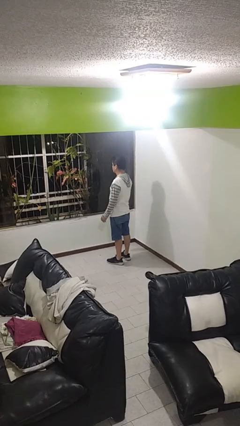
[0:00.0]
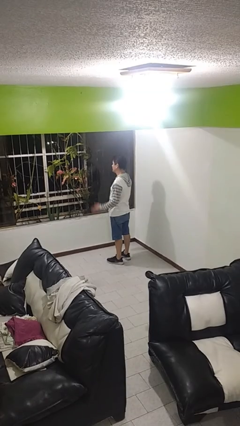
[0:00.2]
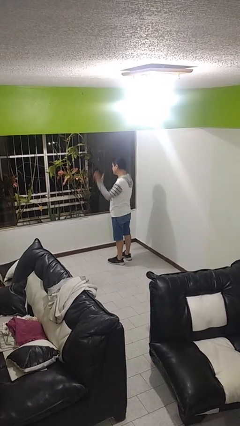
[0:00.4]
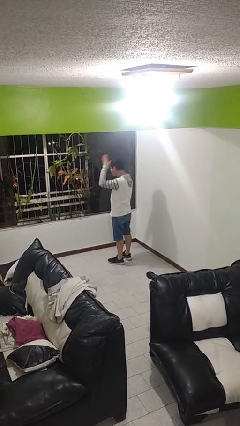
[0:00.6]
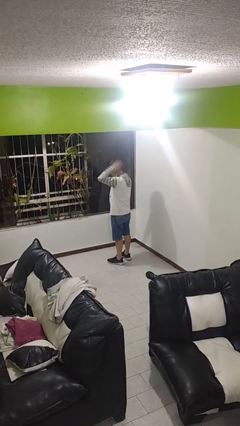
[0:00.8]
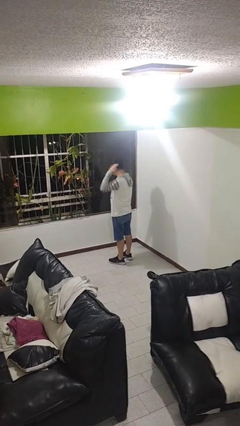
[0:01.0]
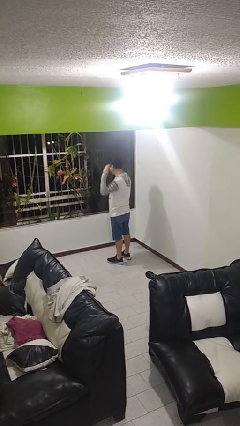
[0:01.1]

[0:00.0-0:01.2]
person swats bug

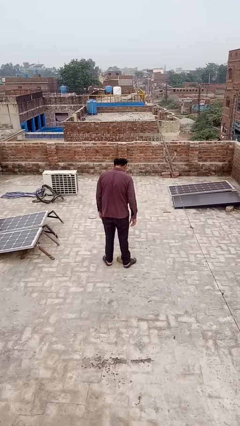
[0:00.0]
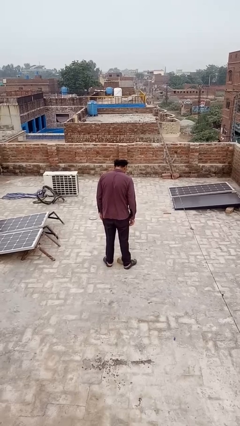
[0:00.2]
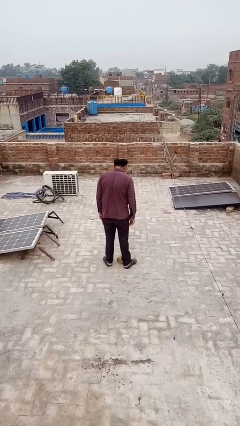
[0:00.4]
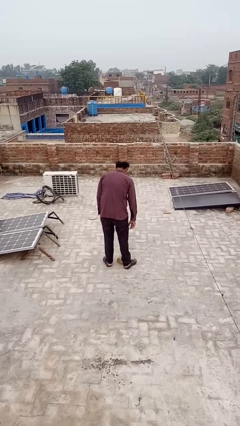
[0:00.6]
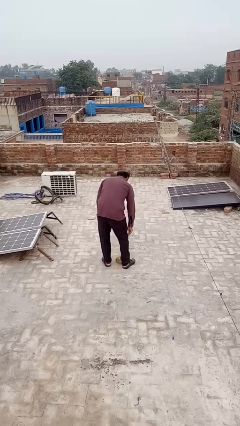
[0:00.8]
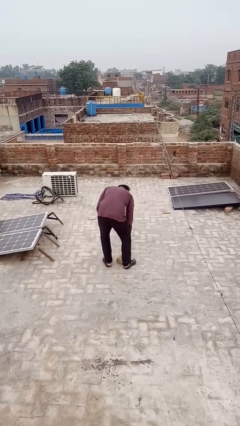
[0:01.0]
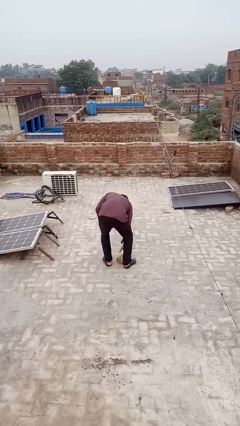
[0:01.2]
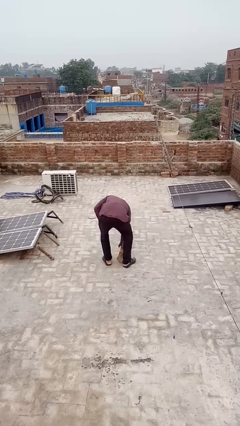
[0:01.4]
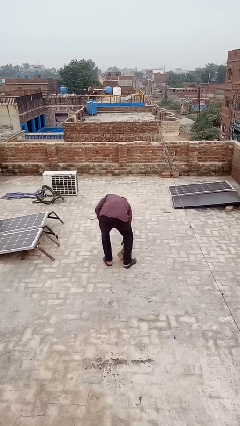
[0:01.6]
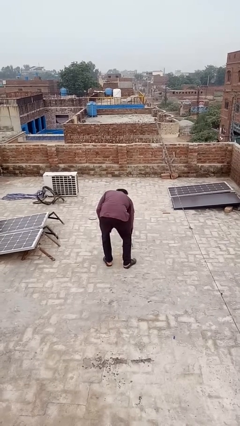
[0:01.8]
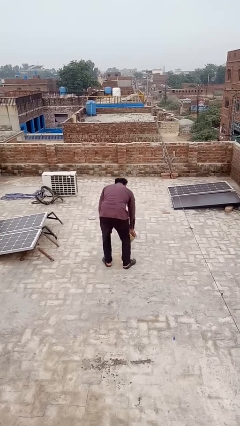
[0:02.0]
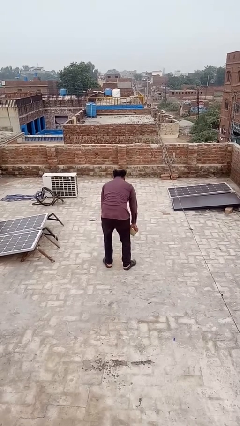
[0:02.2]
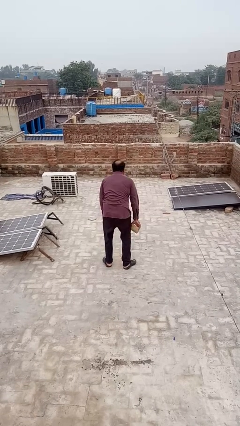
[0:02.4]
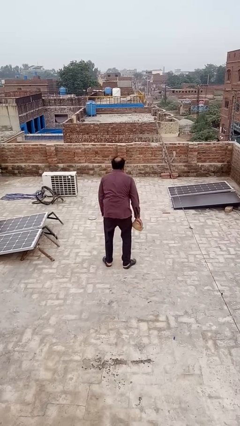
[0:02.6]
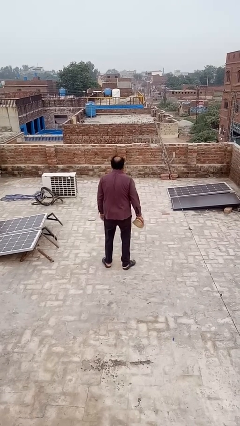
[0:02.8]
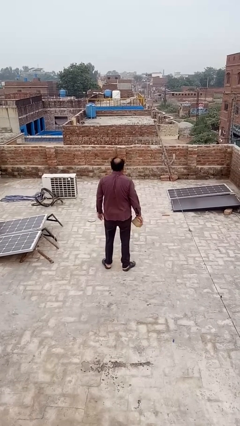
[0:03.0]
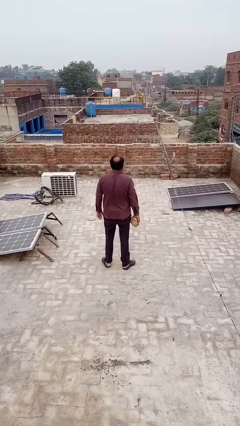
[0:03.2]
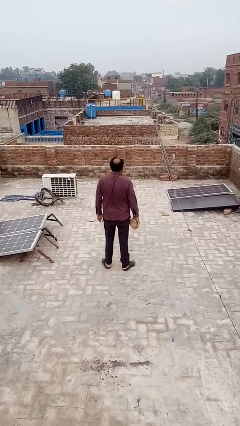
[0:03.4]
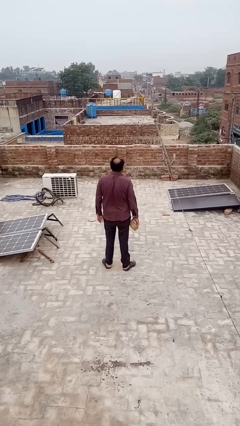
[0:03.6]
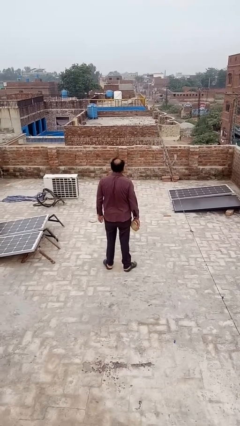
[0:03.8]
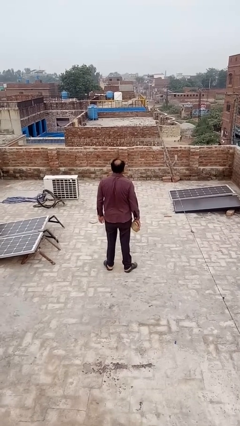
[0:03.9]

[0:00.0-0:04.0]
person picks up object from floor

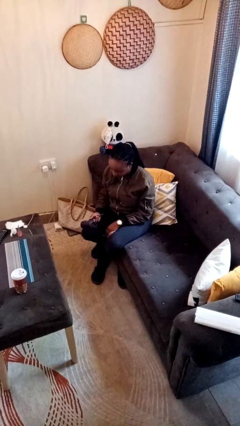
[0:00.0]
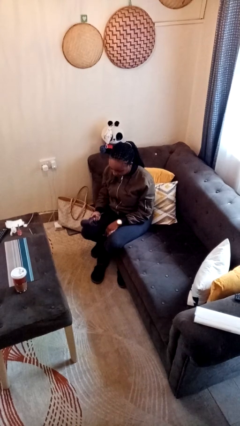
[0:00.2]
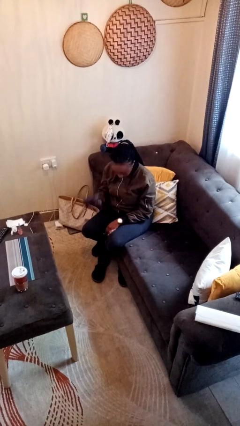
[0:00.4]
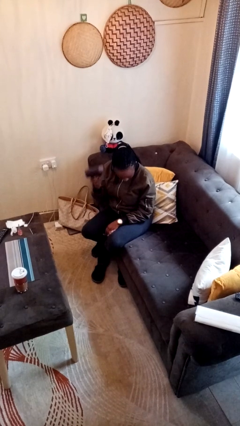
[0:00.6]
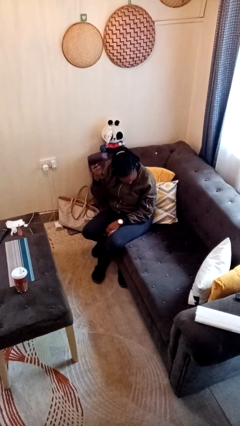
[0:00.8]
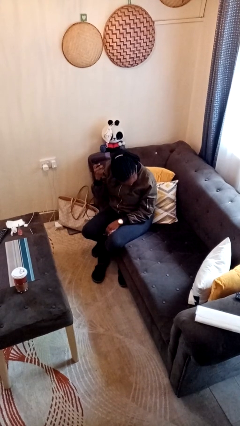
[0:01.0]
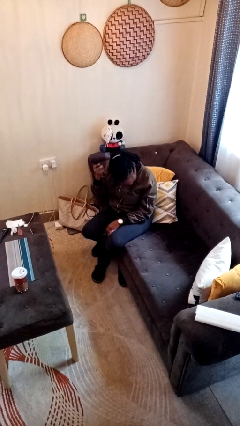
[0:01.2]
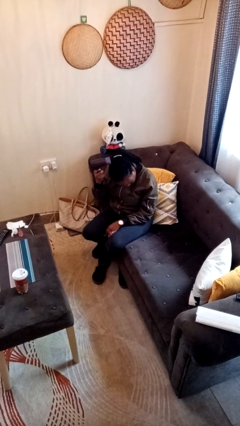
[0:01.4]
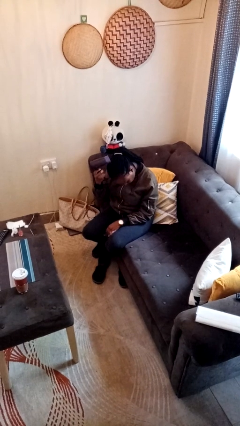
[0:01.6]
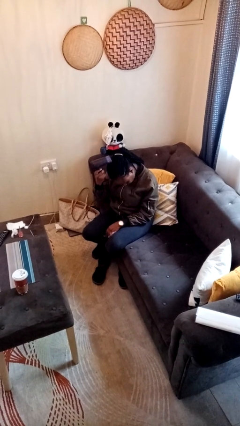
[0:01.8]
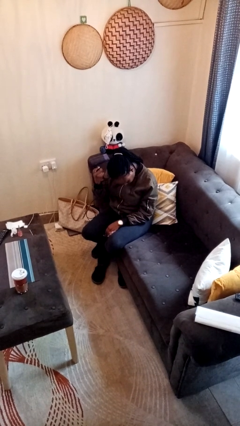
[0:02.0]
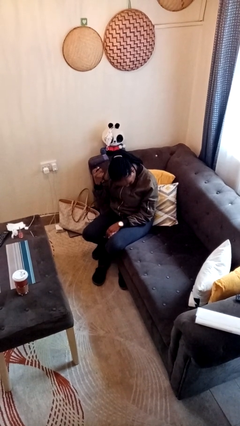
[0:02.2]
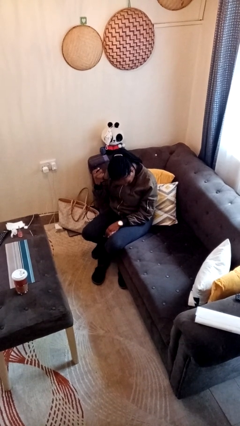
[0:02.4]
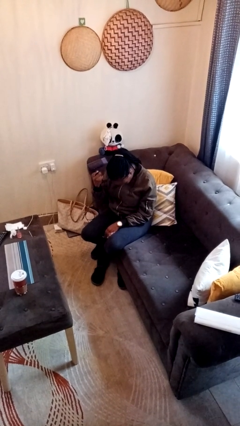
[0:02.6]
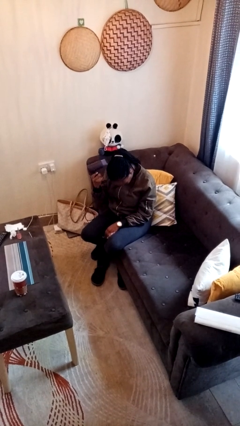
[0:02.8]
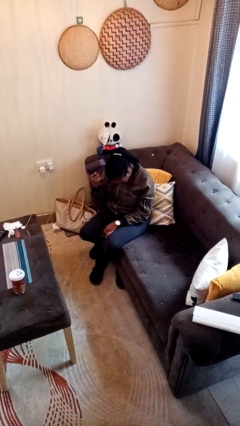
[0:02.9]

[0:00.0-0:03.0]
person dries hair with hairdryer

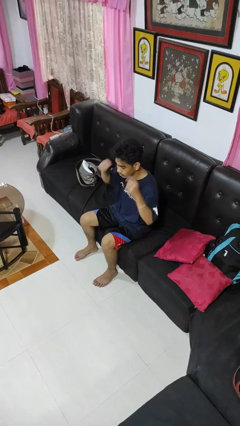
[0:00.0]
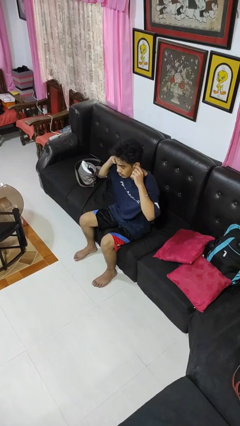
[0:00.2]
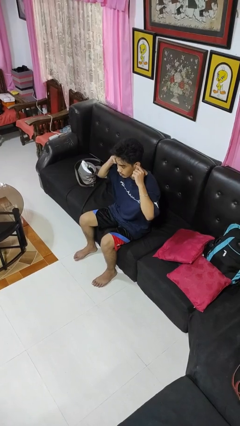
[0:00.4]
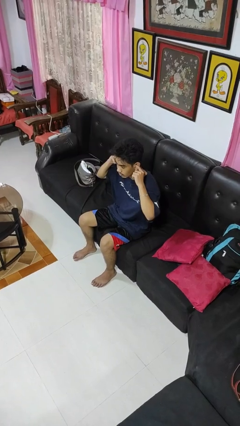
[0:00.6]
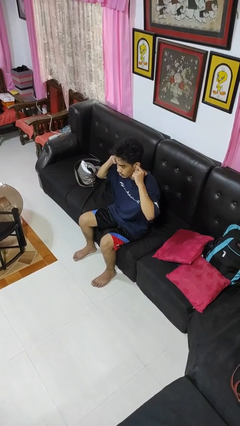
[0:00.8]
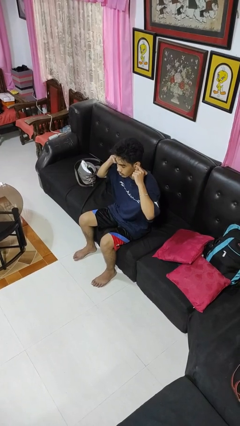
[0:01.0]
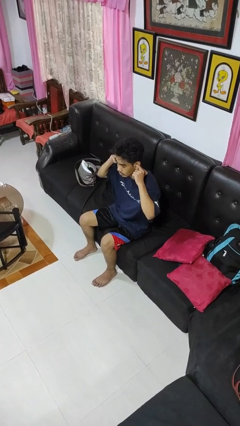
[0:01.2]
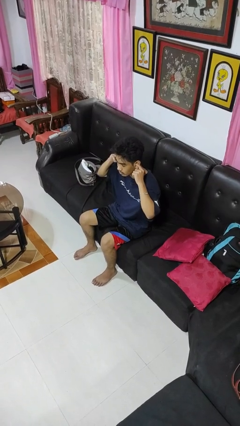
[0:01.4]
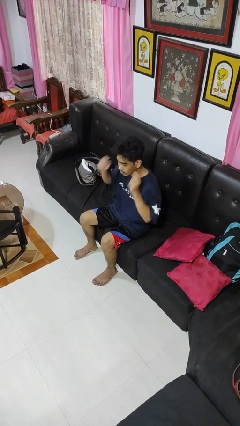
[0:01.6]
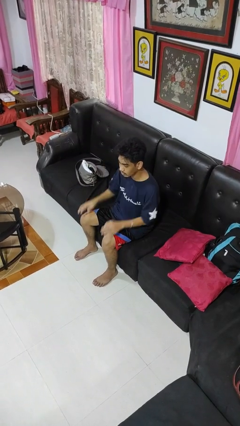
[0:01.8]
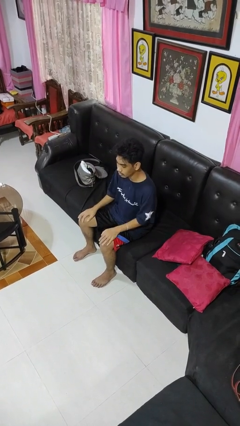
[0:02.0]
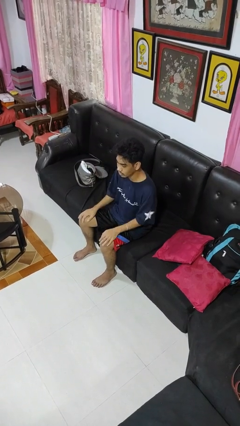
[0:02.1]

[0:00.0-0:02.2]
person puts fingers in ear

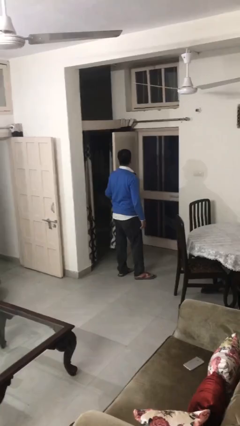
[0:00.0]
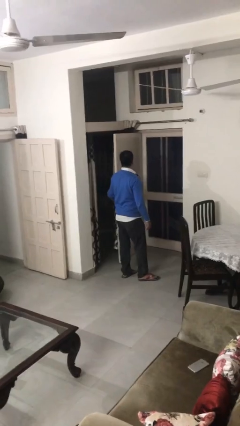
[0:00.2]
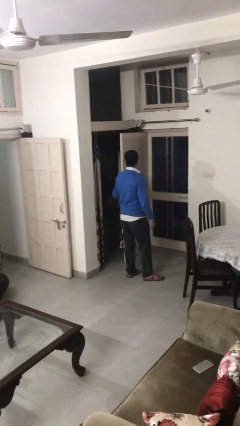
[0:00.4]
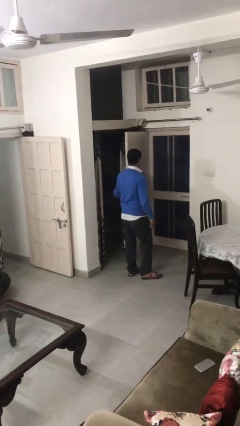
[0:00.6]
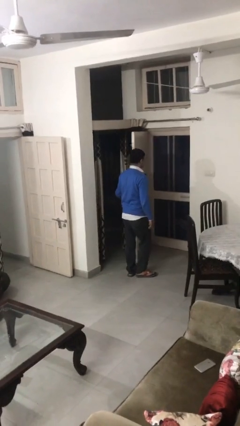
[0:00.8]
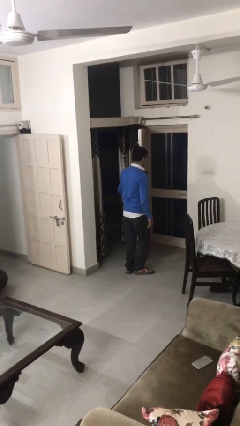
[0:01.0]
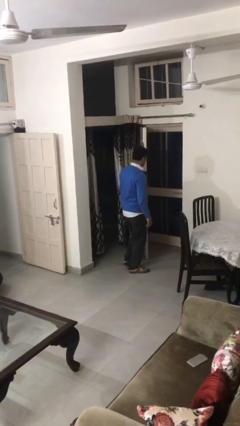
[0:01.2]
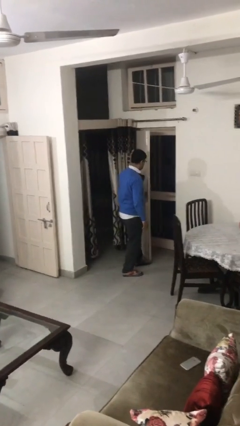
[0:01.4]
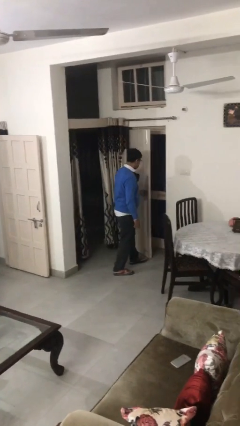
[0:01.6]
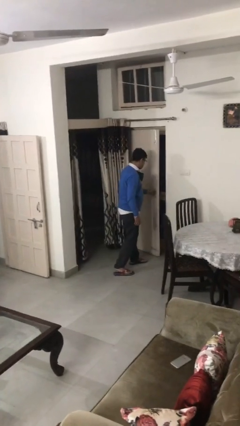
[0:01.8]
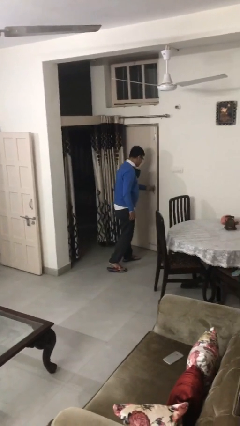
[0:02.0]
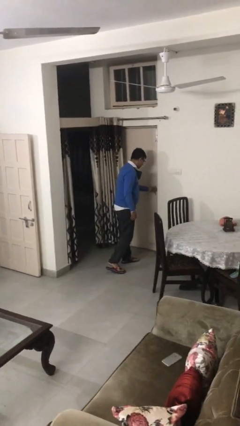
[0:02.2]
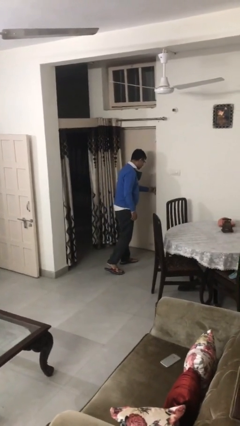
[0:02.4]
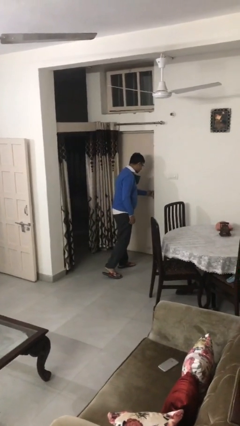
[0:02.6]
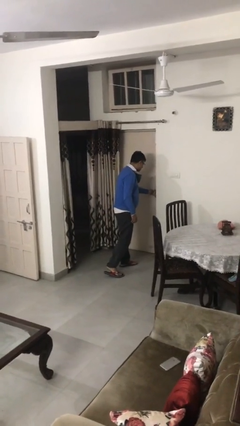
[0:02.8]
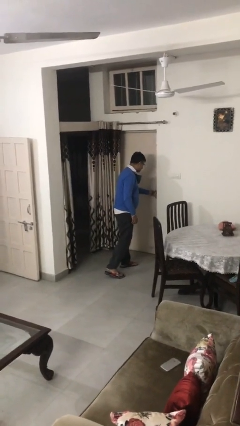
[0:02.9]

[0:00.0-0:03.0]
person closes facility door

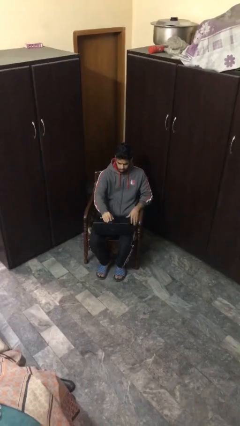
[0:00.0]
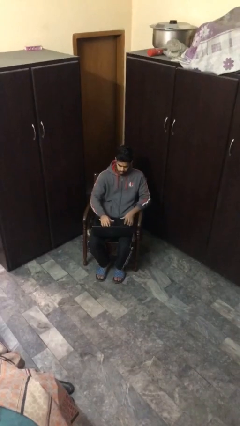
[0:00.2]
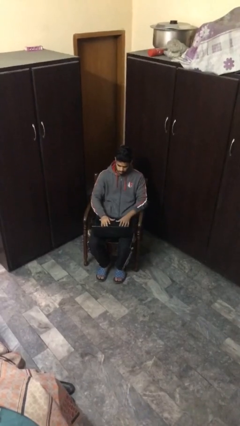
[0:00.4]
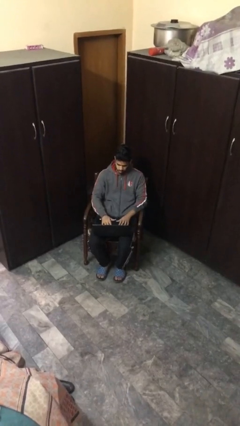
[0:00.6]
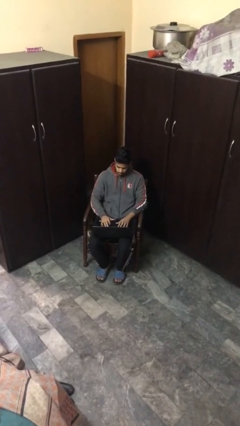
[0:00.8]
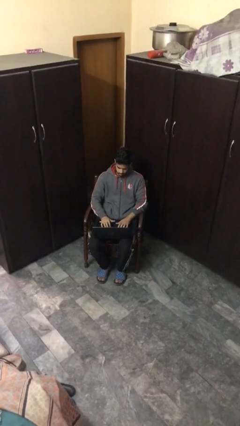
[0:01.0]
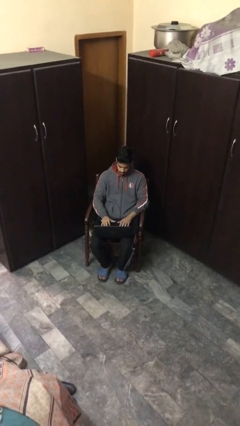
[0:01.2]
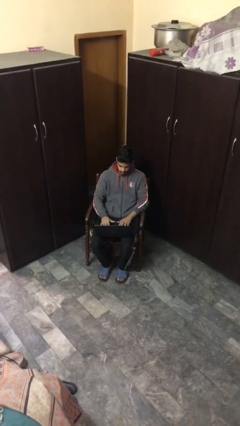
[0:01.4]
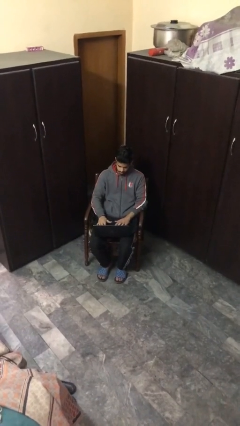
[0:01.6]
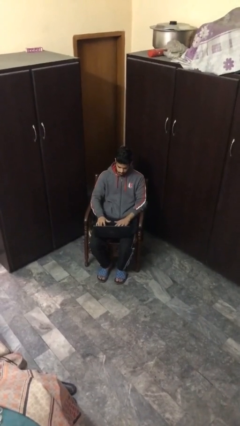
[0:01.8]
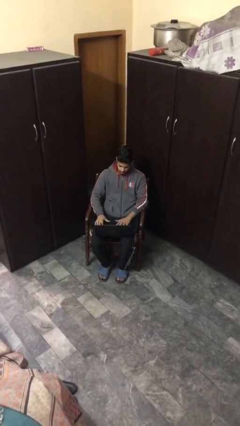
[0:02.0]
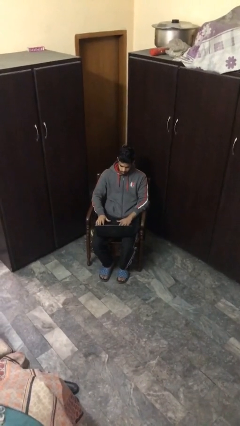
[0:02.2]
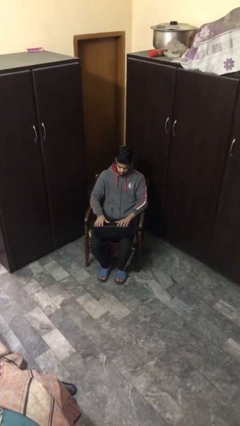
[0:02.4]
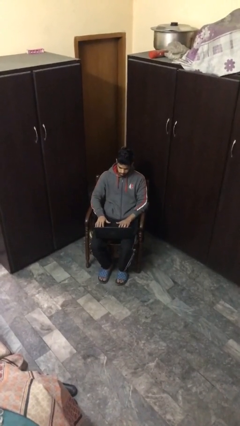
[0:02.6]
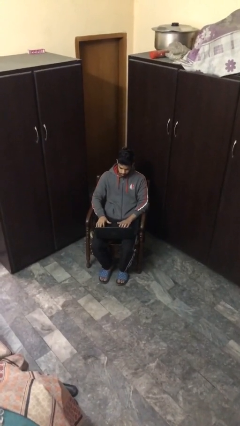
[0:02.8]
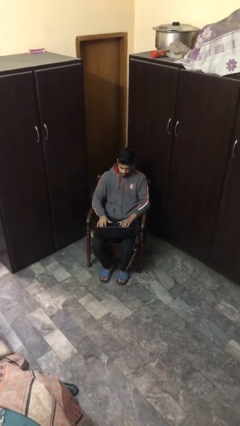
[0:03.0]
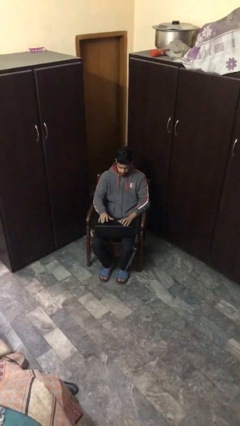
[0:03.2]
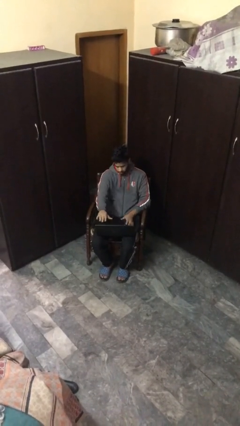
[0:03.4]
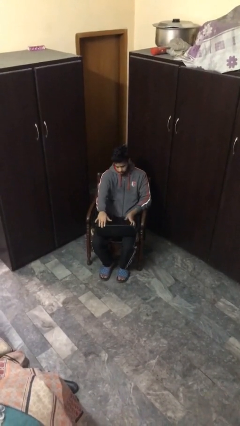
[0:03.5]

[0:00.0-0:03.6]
person interacts with laptop

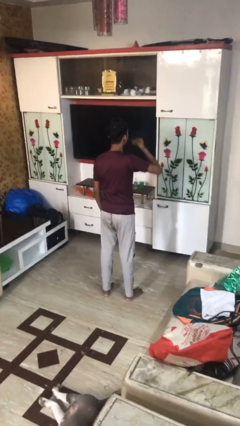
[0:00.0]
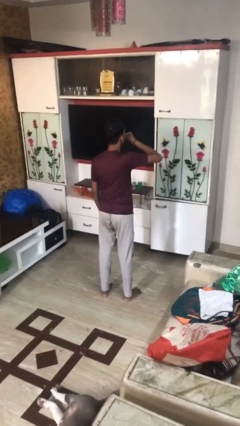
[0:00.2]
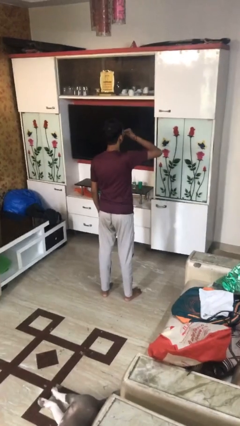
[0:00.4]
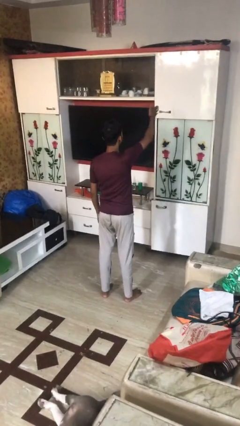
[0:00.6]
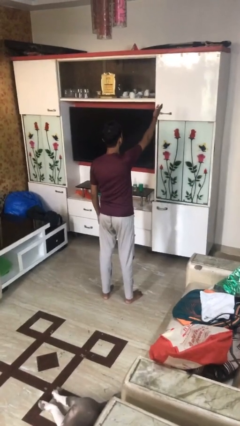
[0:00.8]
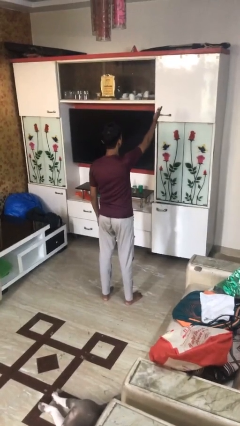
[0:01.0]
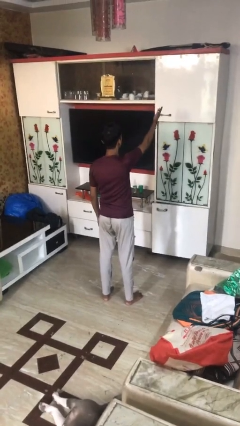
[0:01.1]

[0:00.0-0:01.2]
person gestures blow kiss
